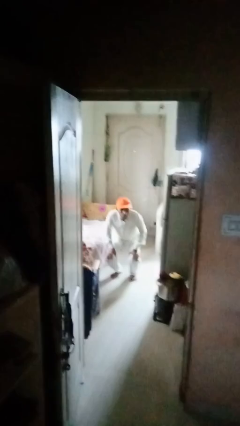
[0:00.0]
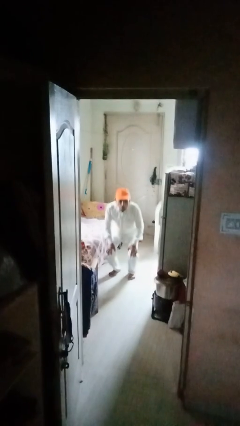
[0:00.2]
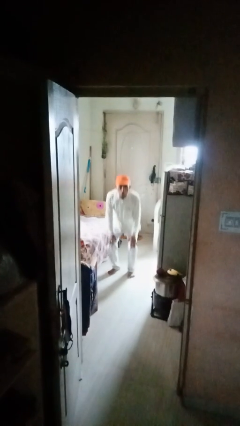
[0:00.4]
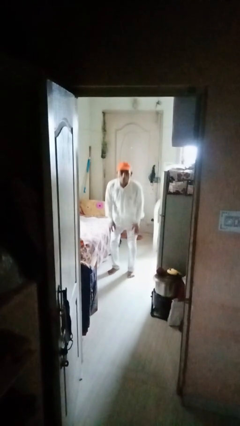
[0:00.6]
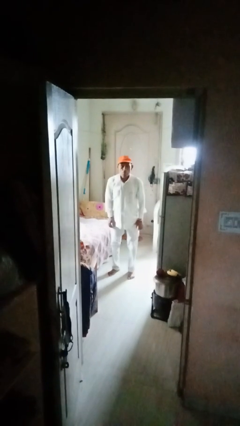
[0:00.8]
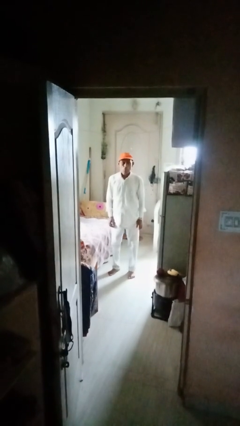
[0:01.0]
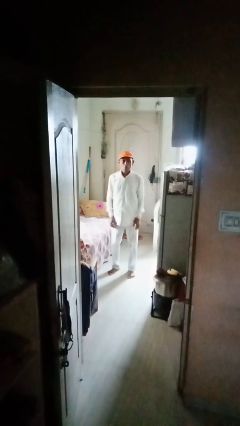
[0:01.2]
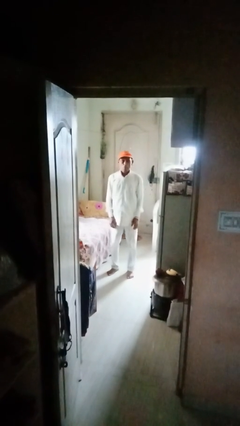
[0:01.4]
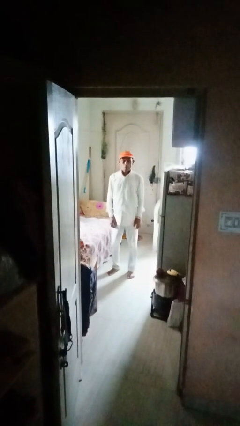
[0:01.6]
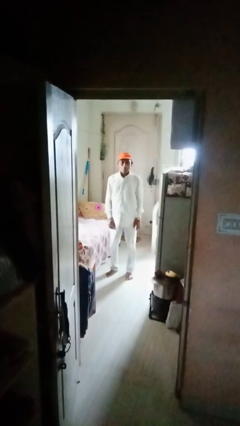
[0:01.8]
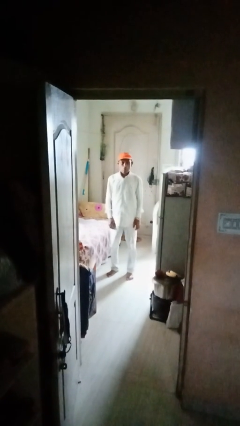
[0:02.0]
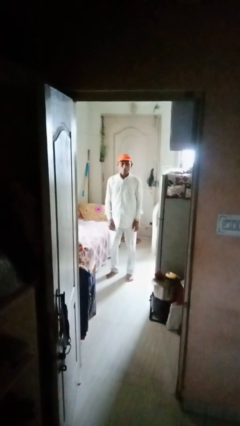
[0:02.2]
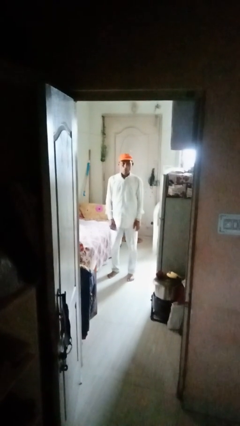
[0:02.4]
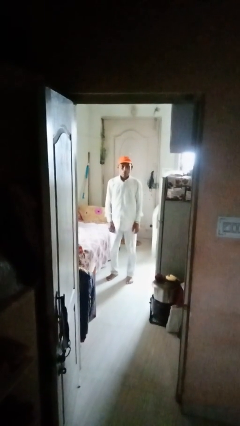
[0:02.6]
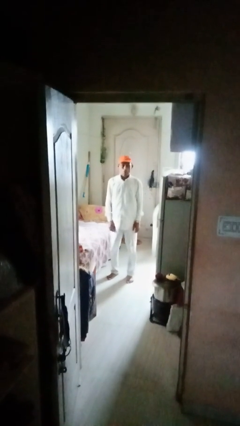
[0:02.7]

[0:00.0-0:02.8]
person stands up

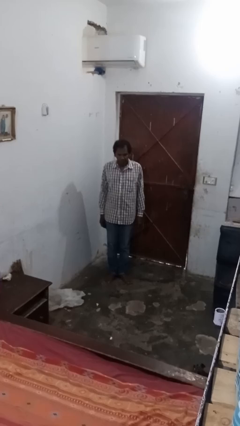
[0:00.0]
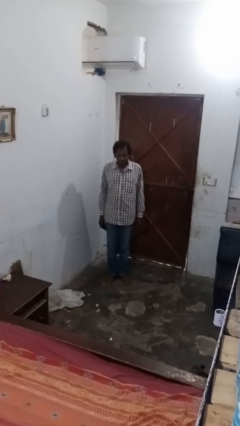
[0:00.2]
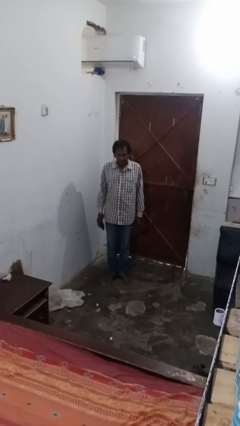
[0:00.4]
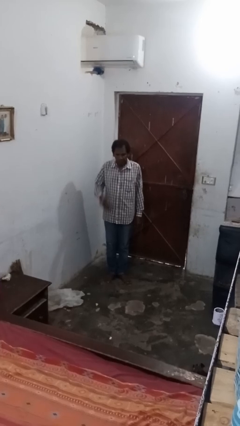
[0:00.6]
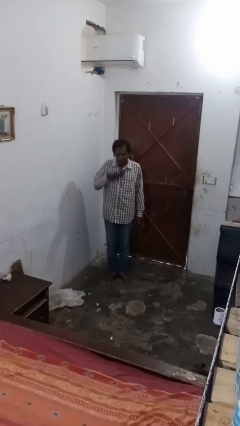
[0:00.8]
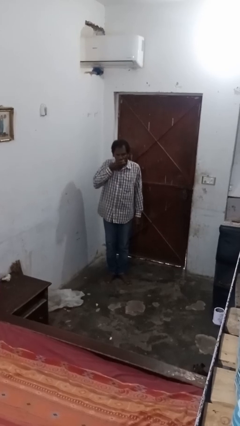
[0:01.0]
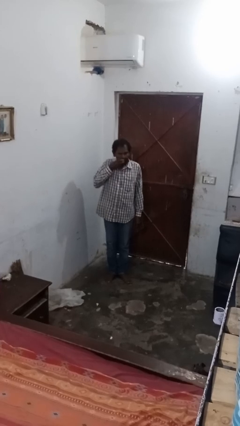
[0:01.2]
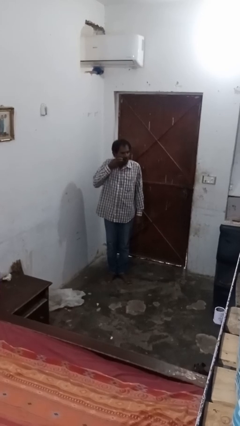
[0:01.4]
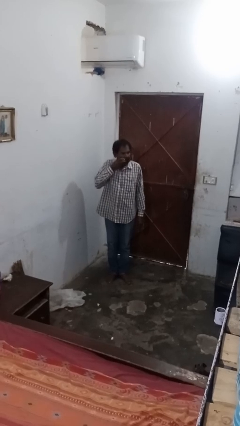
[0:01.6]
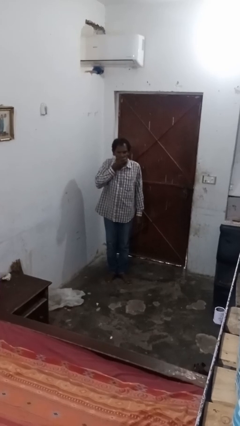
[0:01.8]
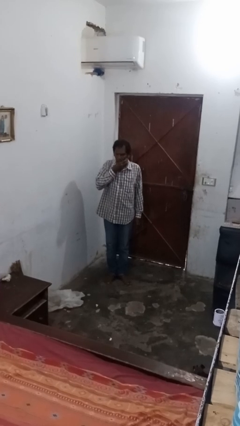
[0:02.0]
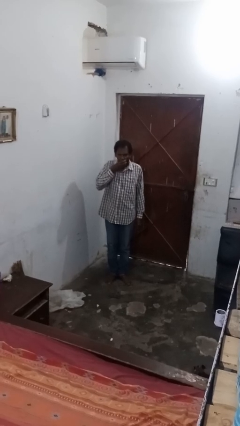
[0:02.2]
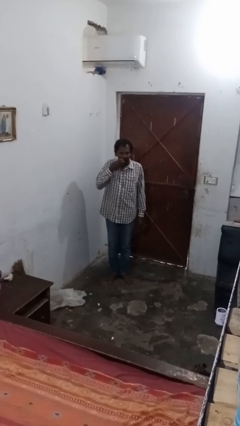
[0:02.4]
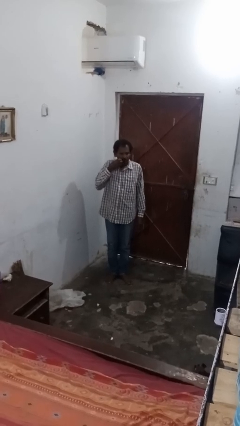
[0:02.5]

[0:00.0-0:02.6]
person wipes mouth with napkin

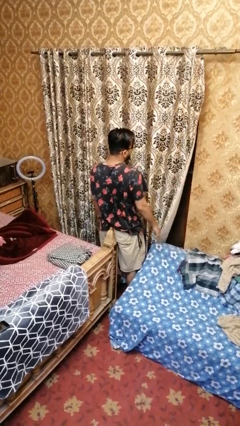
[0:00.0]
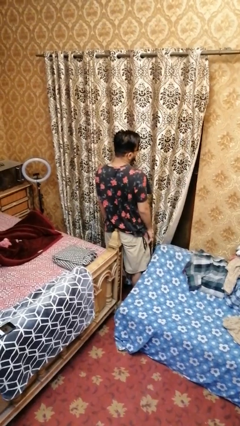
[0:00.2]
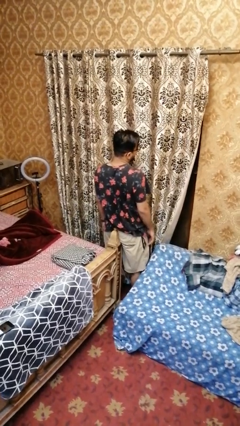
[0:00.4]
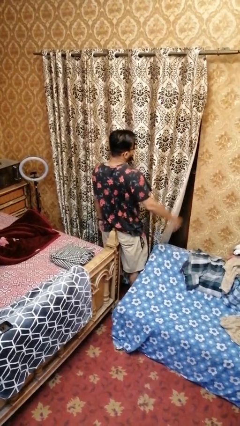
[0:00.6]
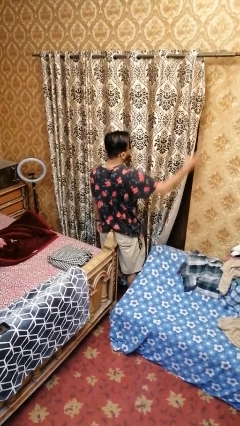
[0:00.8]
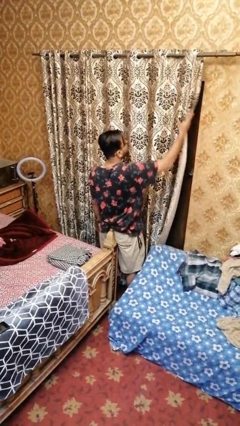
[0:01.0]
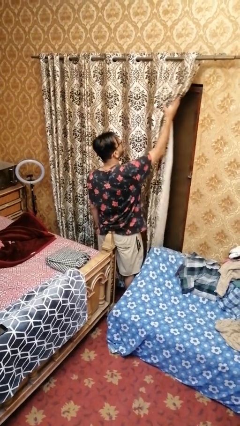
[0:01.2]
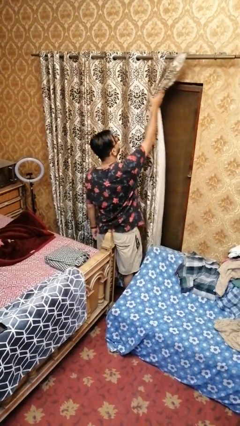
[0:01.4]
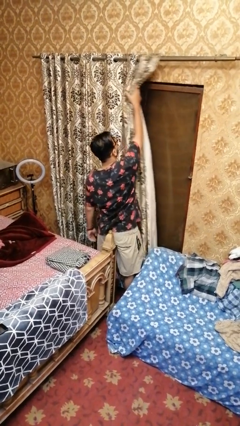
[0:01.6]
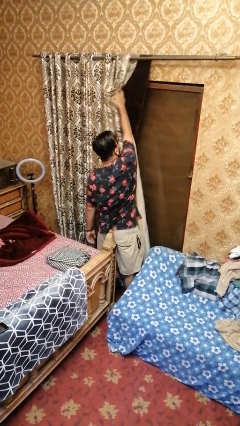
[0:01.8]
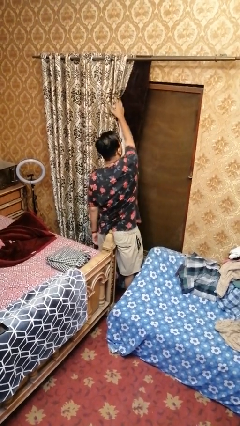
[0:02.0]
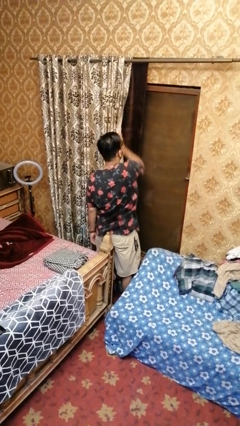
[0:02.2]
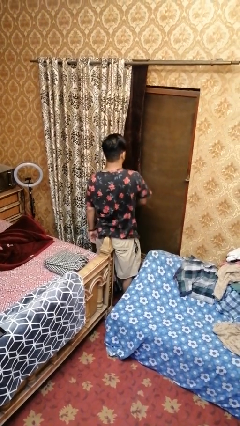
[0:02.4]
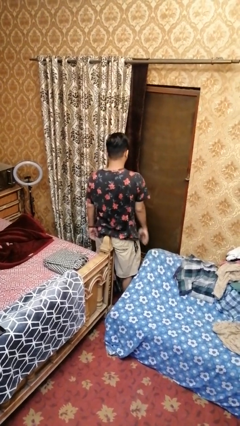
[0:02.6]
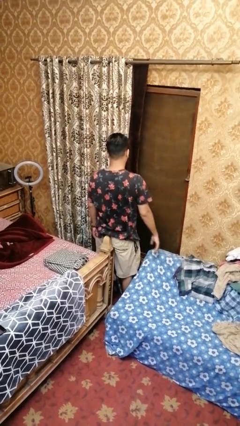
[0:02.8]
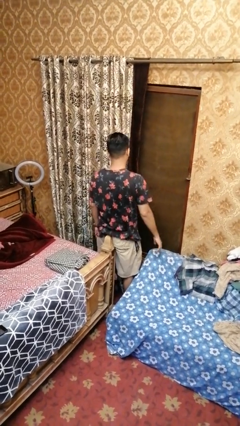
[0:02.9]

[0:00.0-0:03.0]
person opens curtains

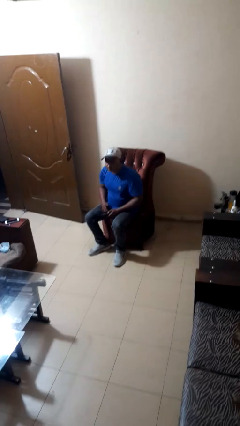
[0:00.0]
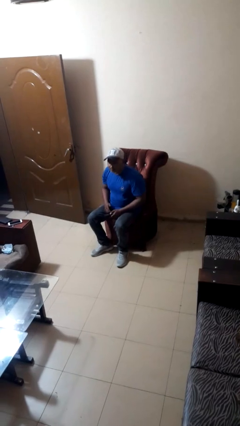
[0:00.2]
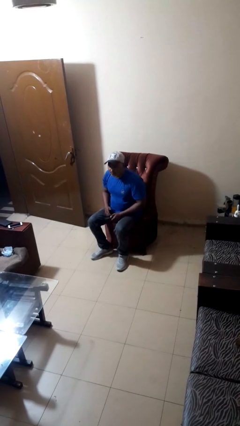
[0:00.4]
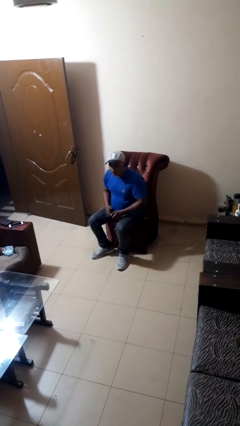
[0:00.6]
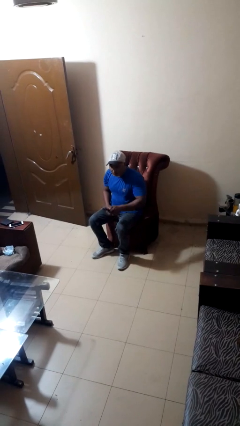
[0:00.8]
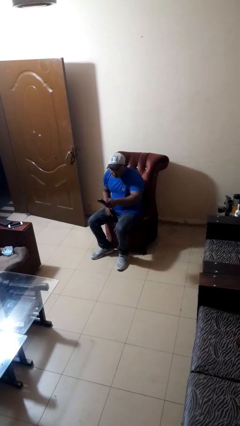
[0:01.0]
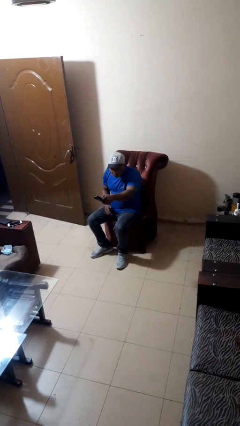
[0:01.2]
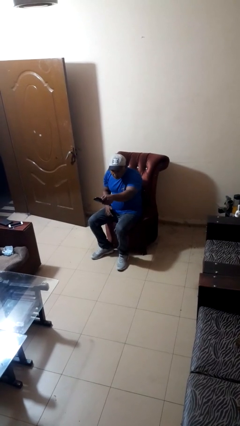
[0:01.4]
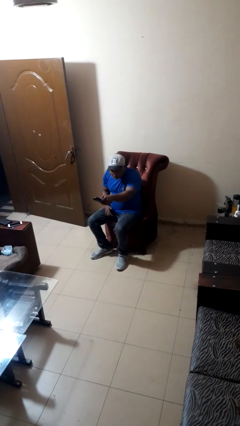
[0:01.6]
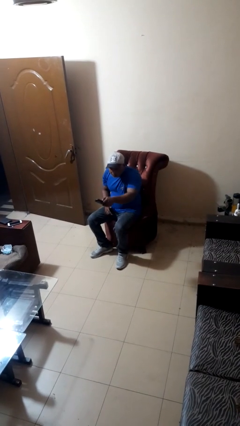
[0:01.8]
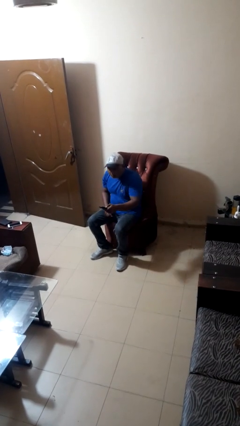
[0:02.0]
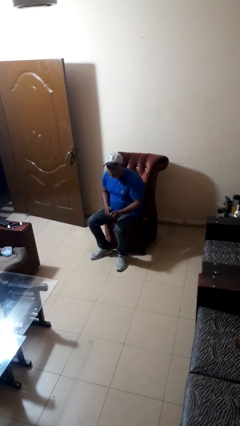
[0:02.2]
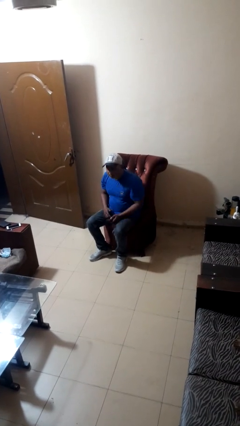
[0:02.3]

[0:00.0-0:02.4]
person uses television remote

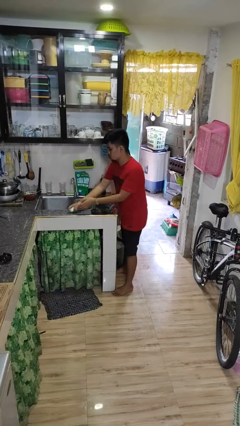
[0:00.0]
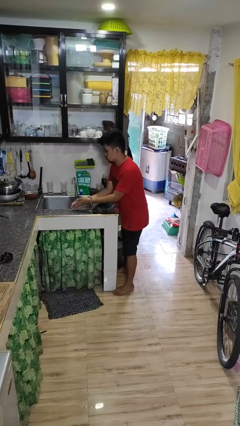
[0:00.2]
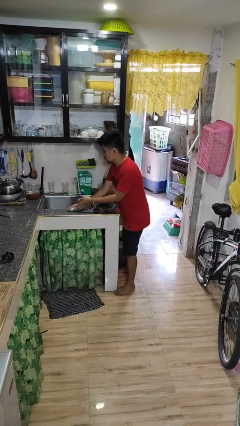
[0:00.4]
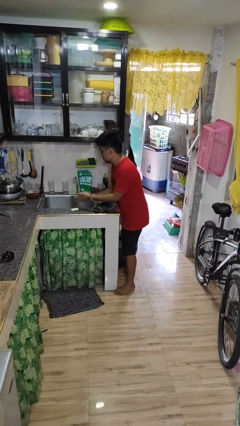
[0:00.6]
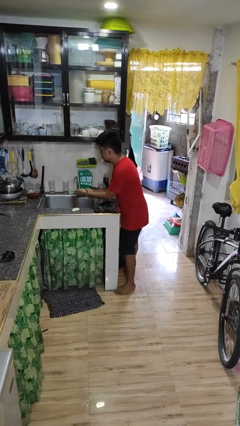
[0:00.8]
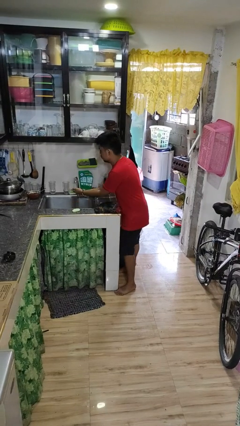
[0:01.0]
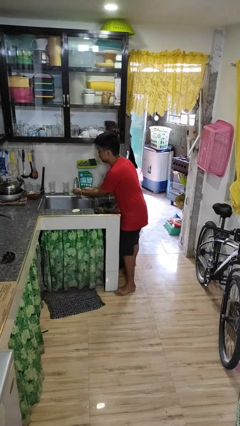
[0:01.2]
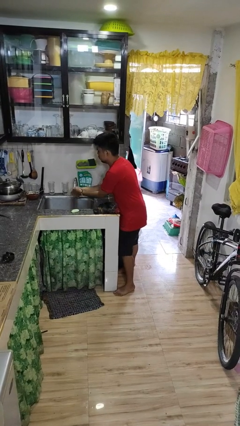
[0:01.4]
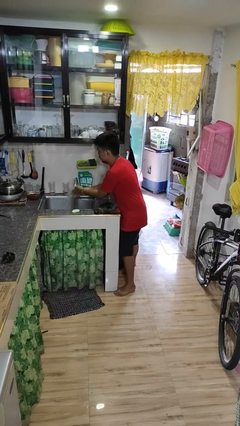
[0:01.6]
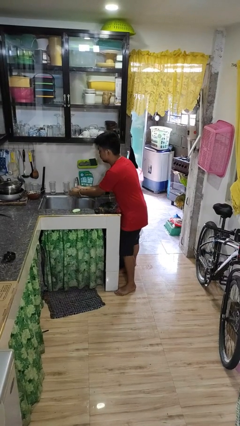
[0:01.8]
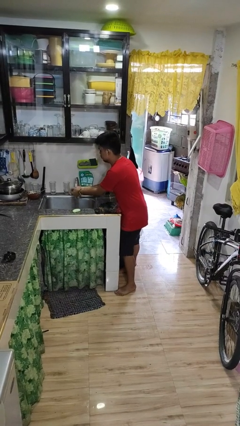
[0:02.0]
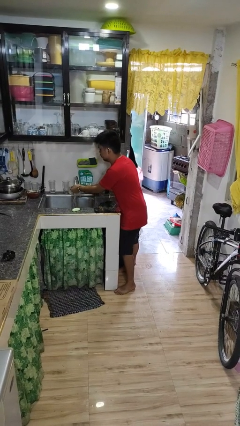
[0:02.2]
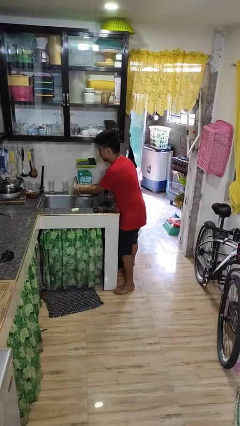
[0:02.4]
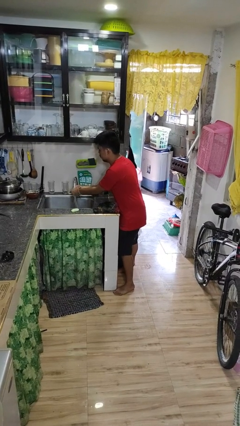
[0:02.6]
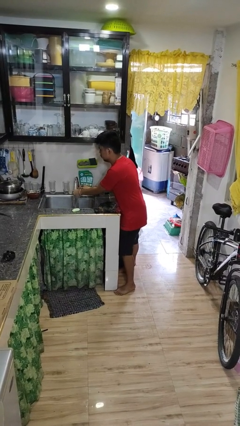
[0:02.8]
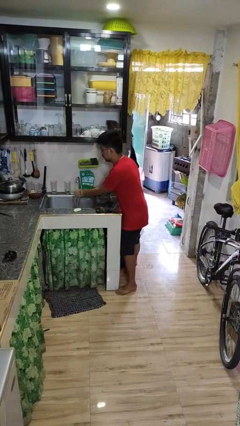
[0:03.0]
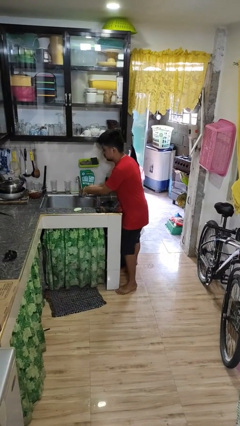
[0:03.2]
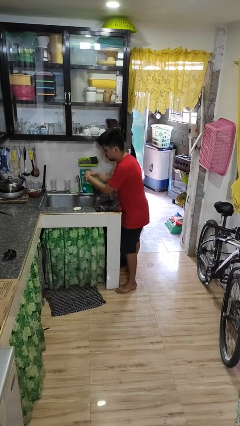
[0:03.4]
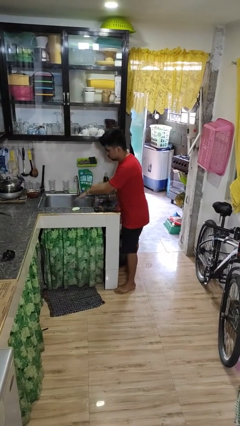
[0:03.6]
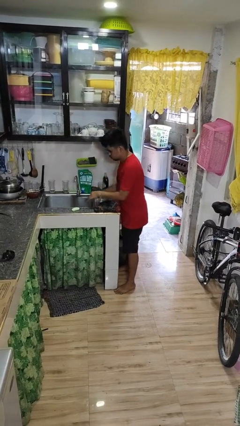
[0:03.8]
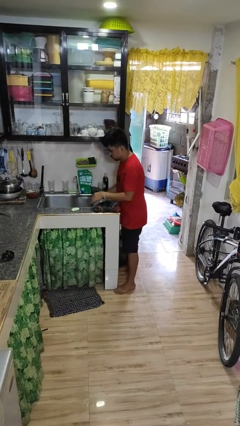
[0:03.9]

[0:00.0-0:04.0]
person washes hands

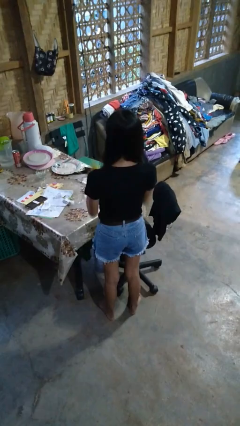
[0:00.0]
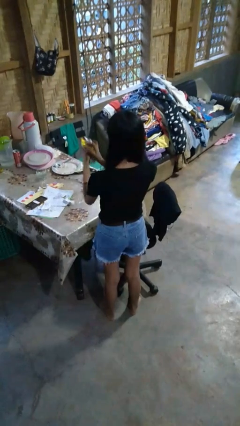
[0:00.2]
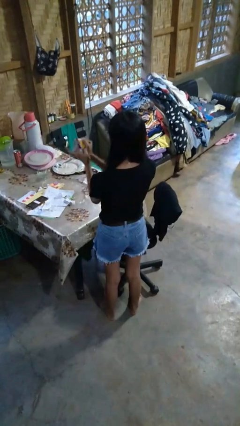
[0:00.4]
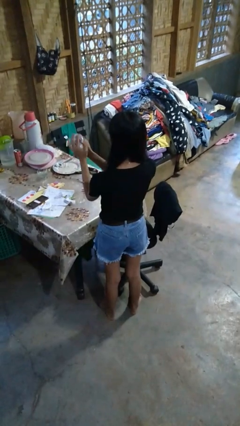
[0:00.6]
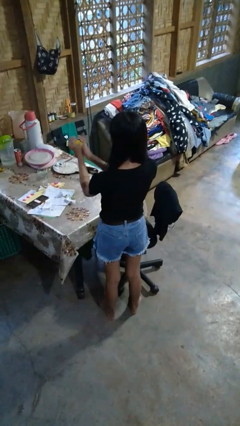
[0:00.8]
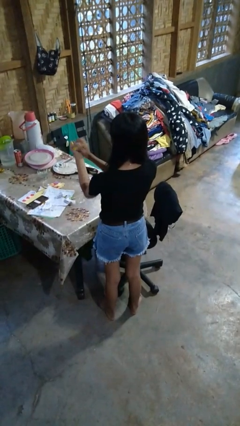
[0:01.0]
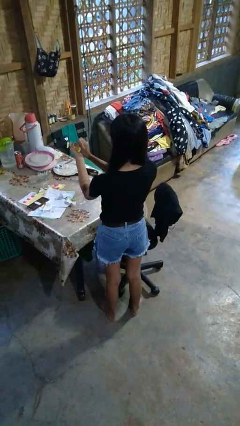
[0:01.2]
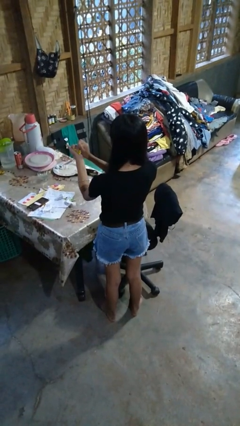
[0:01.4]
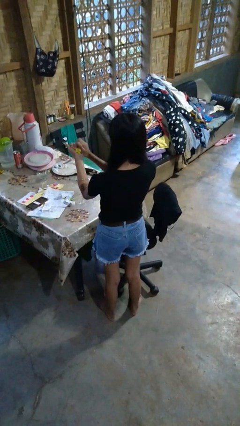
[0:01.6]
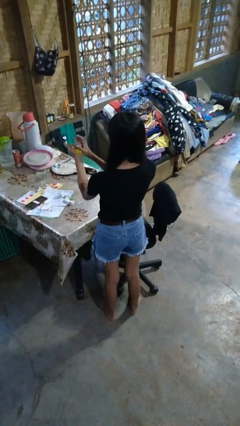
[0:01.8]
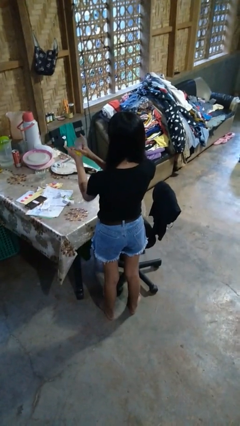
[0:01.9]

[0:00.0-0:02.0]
person crumples paper

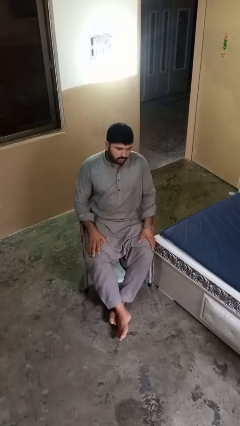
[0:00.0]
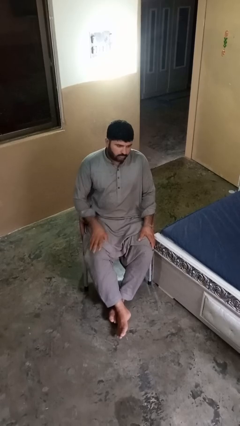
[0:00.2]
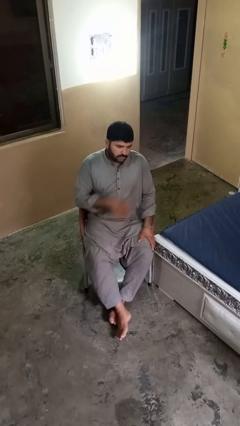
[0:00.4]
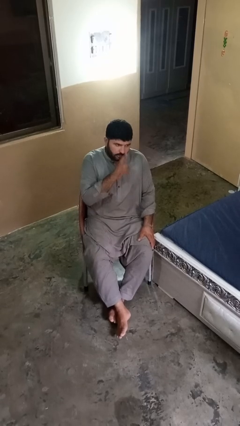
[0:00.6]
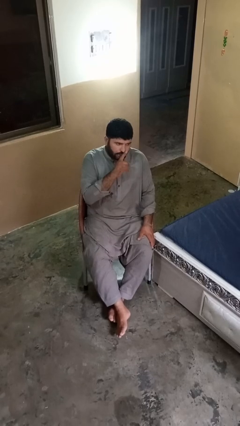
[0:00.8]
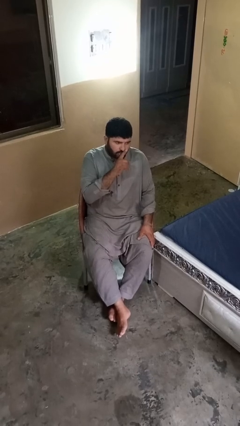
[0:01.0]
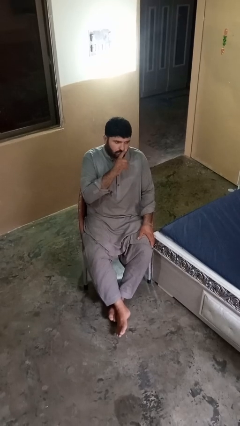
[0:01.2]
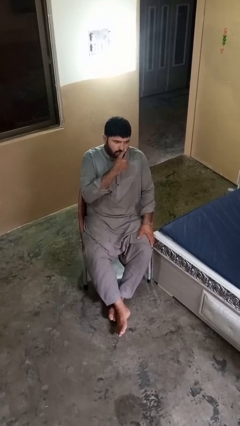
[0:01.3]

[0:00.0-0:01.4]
person gestures be quiet
